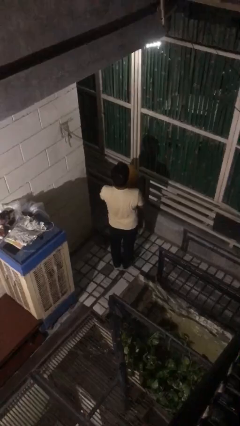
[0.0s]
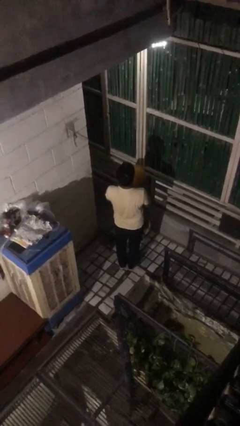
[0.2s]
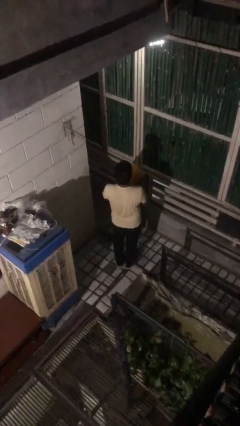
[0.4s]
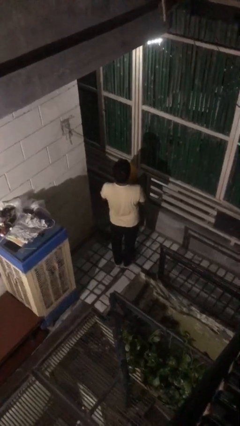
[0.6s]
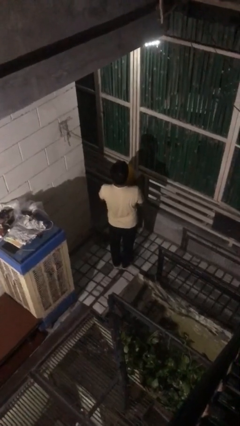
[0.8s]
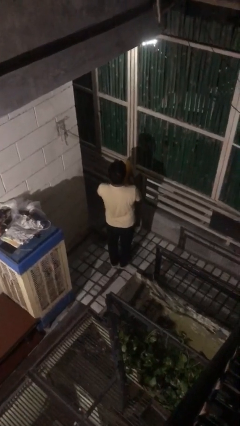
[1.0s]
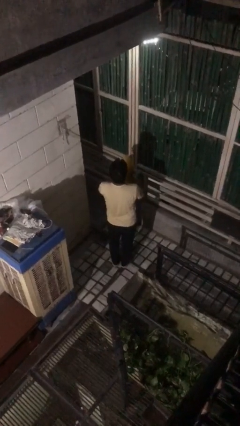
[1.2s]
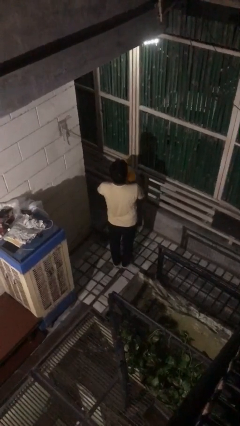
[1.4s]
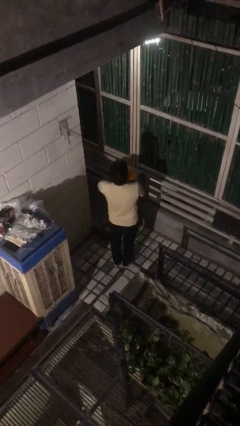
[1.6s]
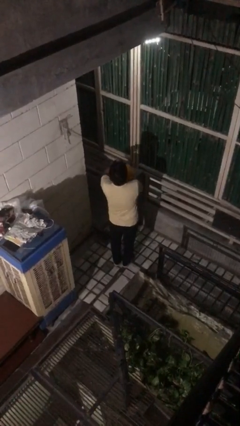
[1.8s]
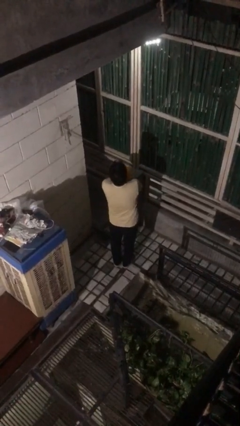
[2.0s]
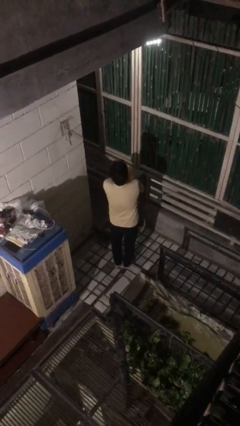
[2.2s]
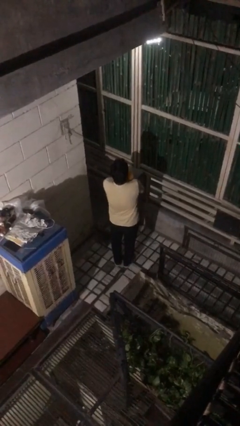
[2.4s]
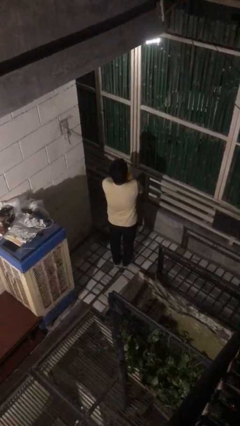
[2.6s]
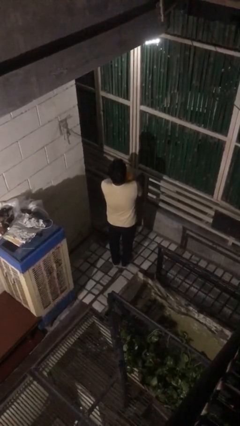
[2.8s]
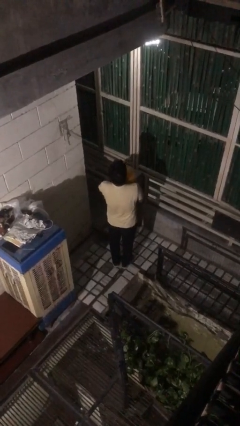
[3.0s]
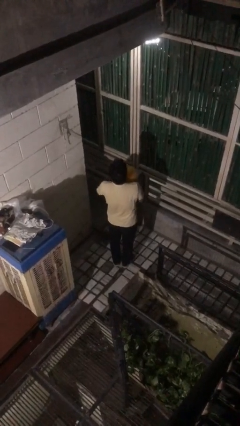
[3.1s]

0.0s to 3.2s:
person hugs stuffed animal

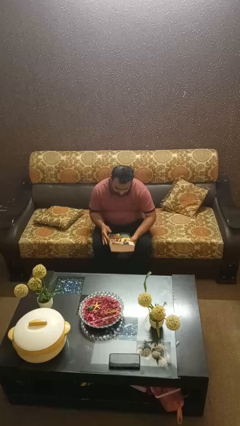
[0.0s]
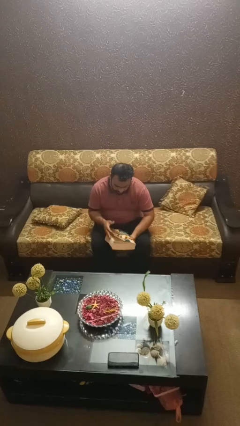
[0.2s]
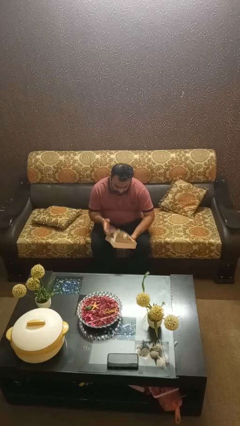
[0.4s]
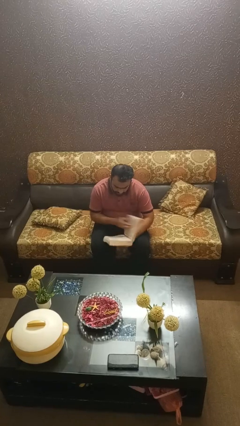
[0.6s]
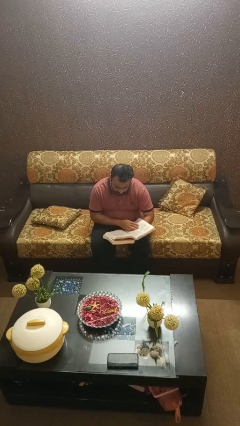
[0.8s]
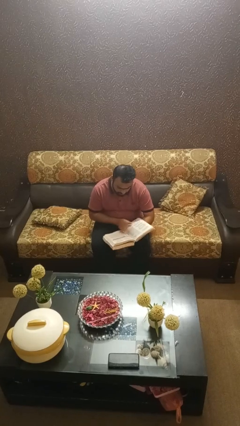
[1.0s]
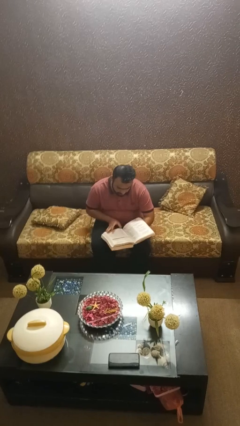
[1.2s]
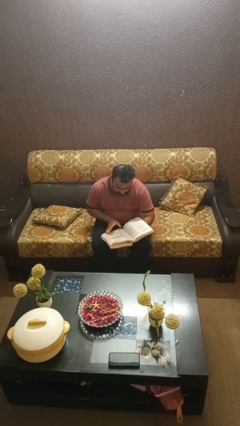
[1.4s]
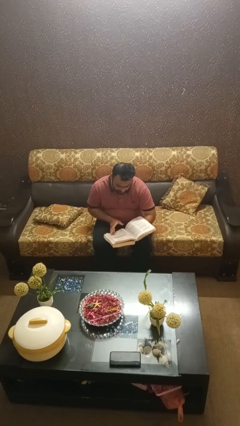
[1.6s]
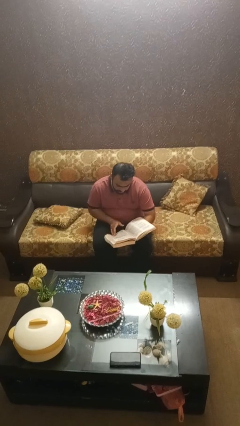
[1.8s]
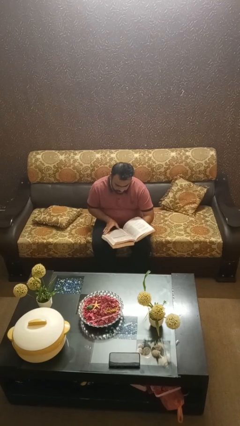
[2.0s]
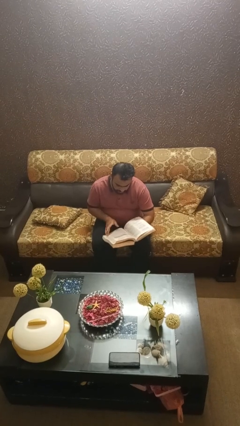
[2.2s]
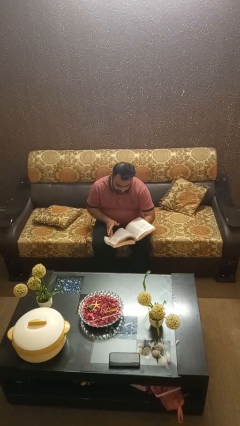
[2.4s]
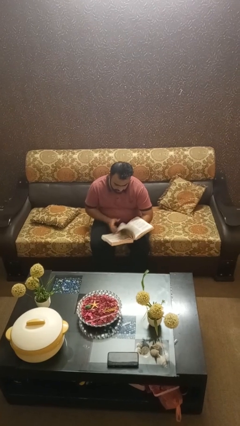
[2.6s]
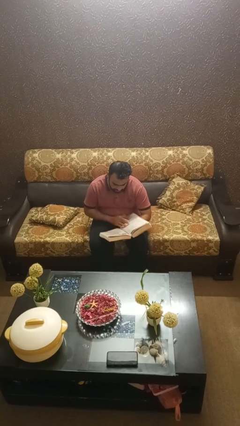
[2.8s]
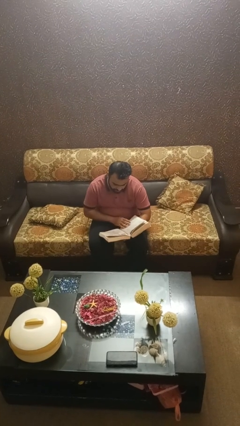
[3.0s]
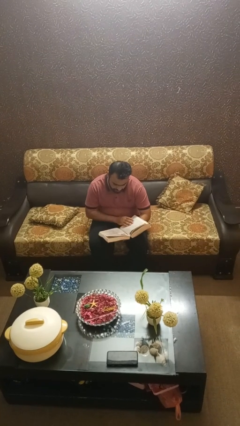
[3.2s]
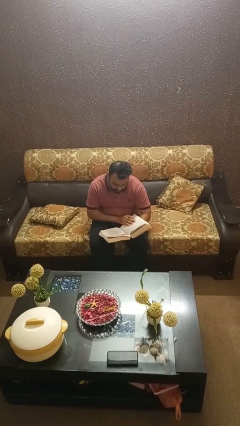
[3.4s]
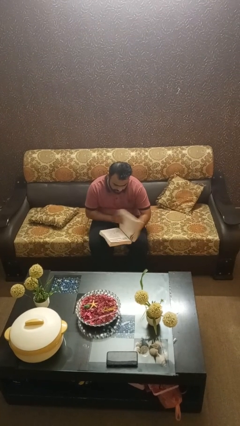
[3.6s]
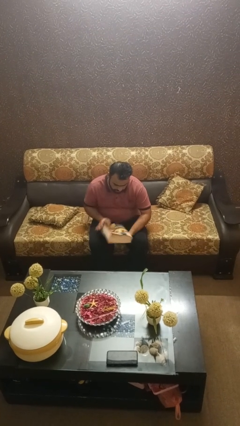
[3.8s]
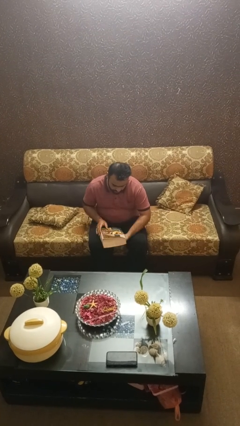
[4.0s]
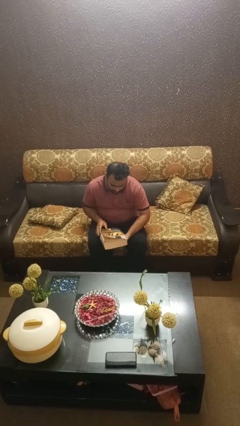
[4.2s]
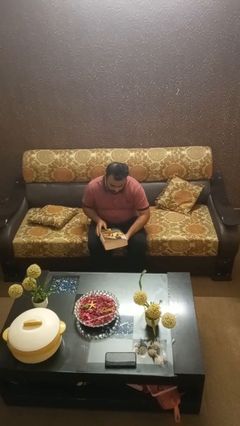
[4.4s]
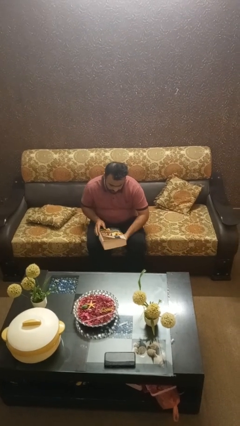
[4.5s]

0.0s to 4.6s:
person reads book

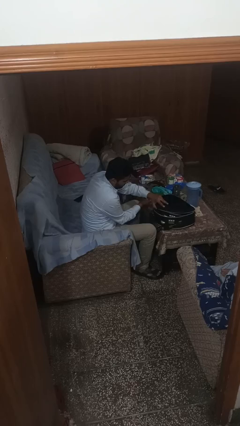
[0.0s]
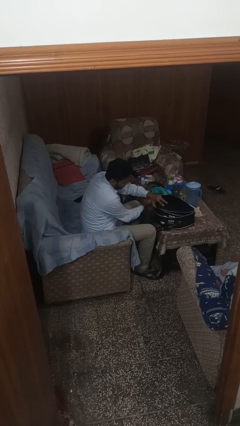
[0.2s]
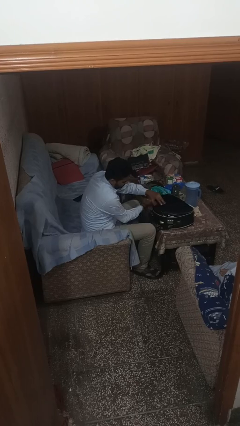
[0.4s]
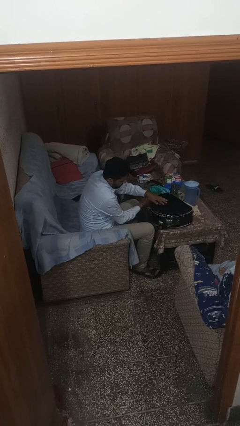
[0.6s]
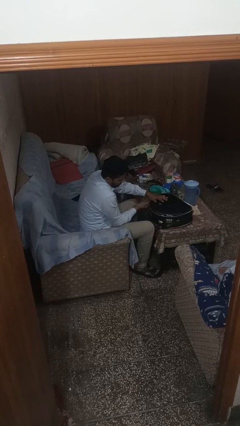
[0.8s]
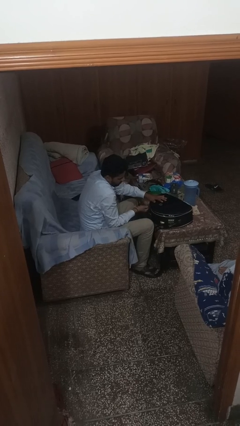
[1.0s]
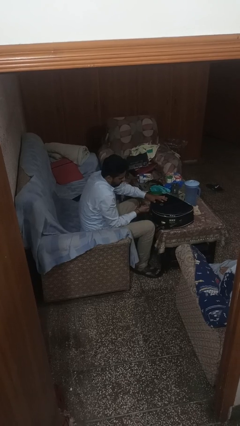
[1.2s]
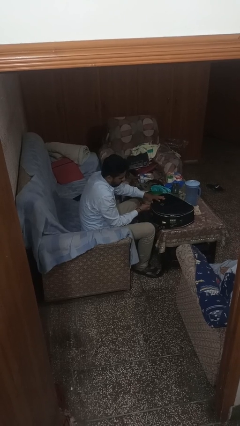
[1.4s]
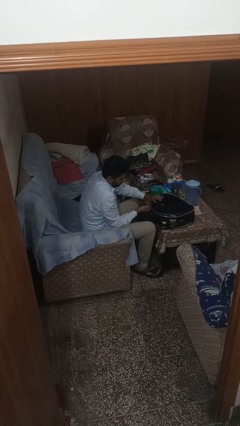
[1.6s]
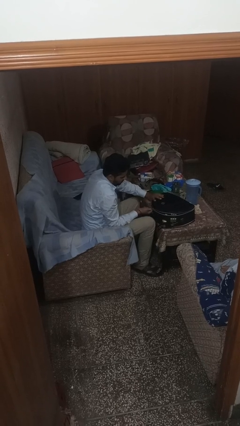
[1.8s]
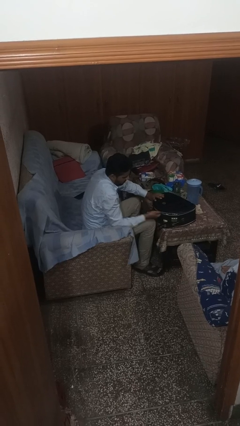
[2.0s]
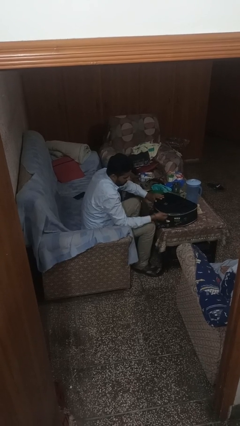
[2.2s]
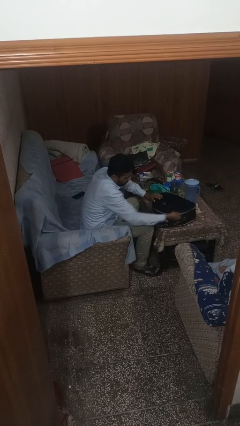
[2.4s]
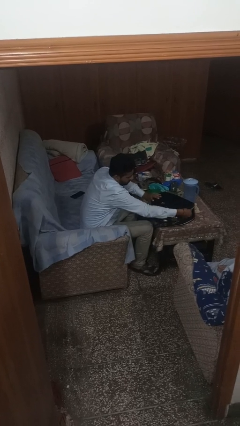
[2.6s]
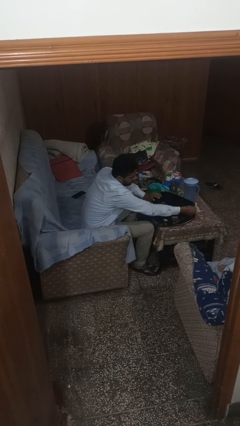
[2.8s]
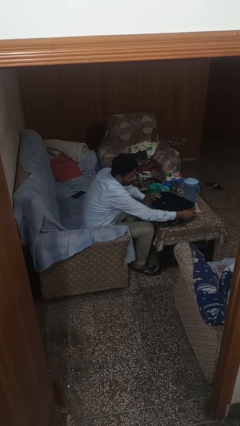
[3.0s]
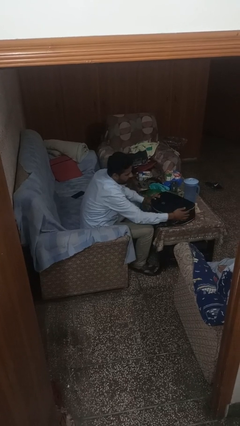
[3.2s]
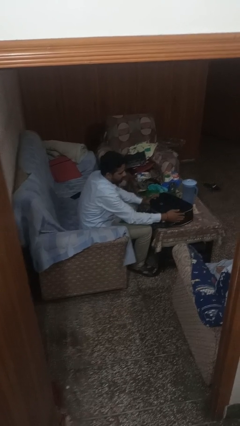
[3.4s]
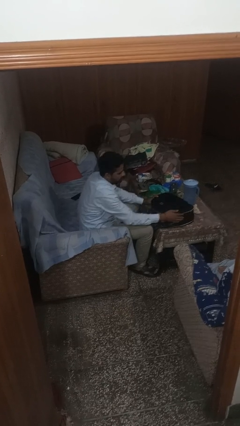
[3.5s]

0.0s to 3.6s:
person closes suitcase

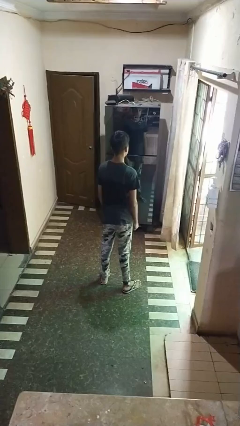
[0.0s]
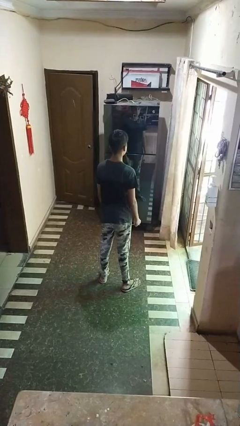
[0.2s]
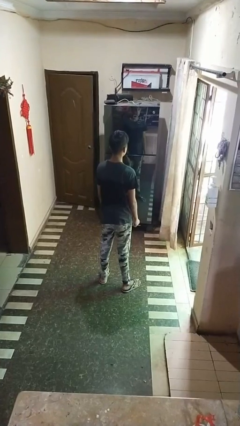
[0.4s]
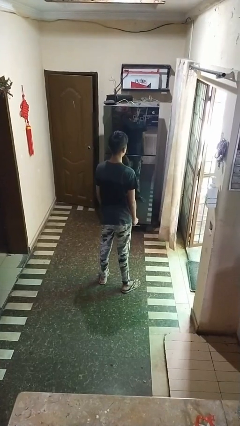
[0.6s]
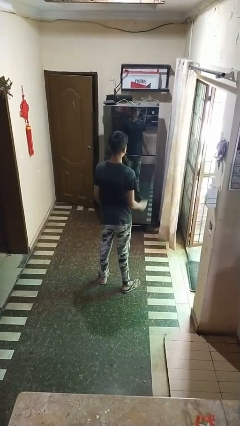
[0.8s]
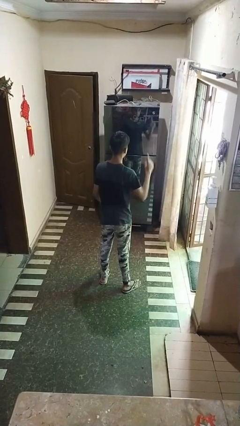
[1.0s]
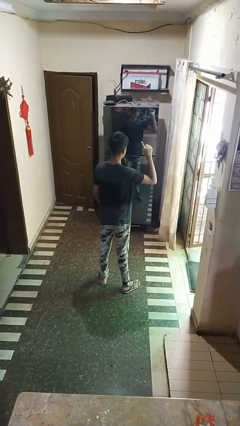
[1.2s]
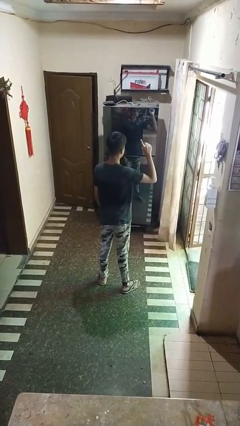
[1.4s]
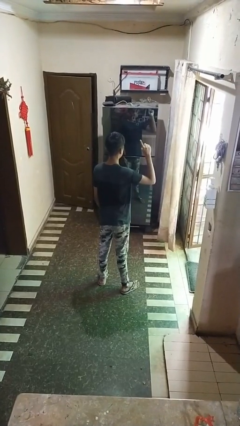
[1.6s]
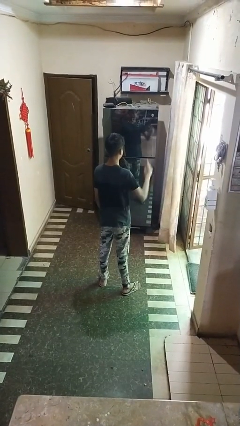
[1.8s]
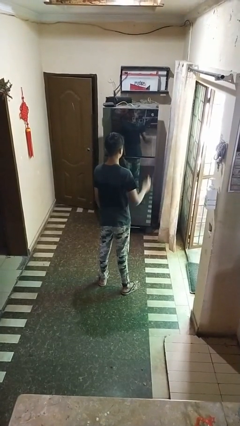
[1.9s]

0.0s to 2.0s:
person gestures number one

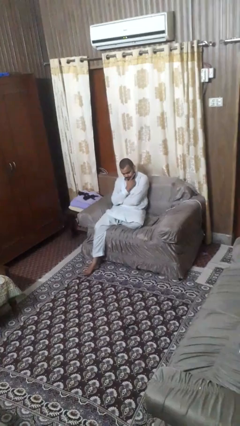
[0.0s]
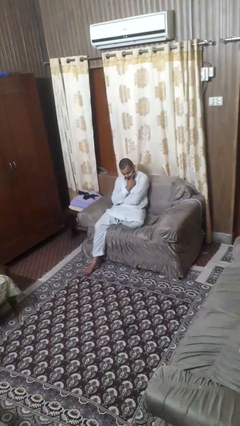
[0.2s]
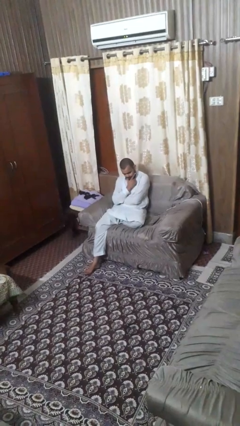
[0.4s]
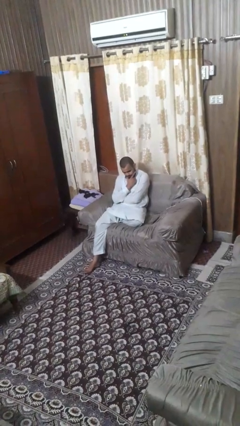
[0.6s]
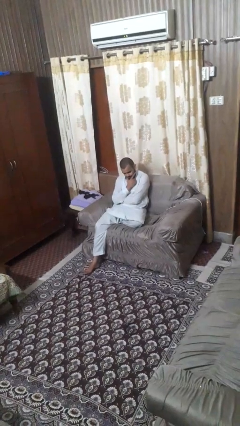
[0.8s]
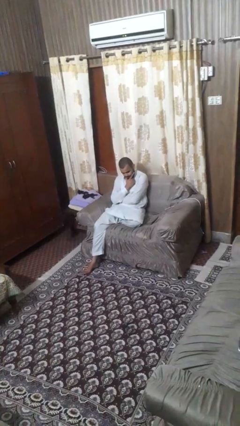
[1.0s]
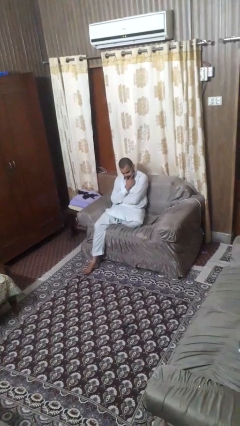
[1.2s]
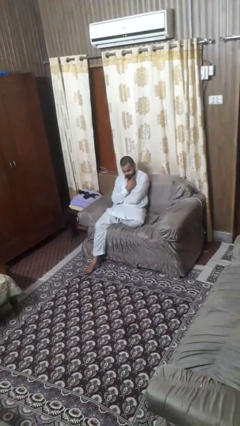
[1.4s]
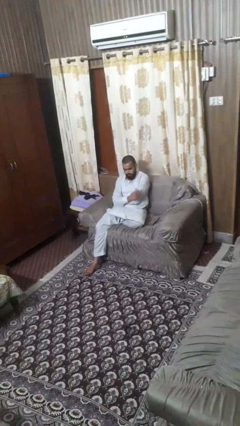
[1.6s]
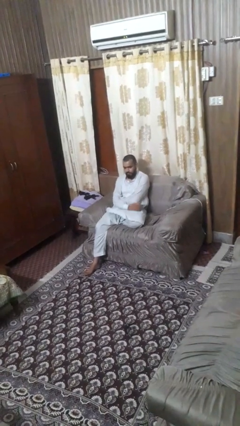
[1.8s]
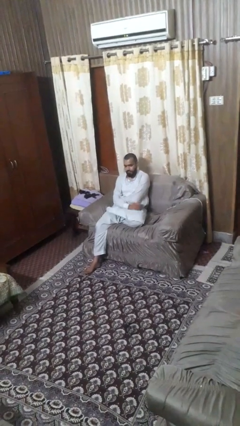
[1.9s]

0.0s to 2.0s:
person strokes chin

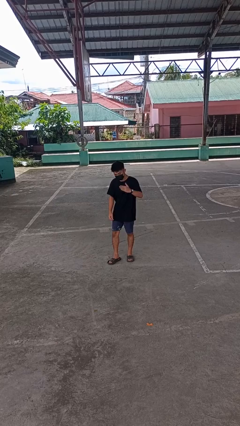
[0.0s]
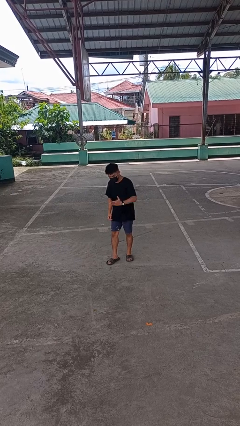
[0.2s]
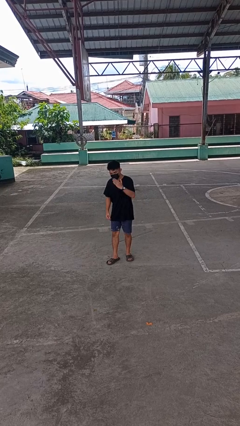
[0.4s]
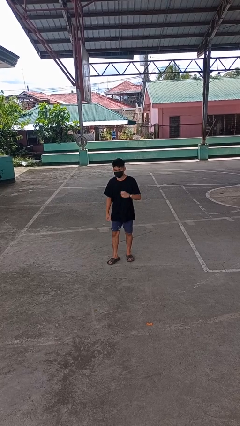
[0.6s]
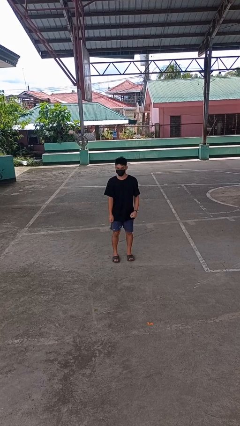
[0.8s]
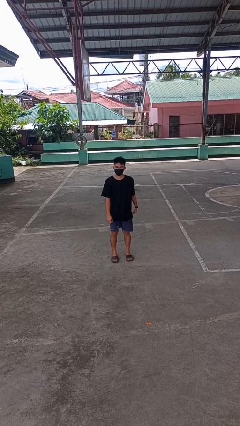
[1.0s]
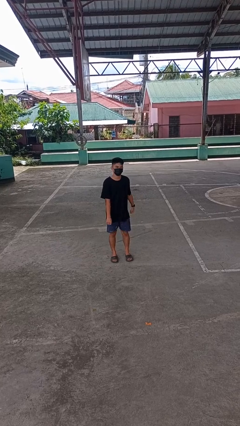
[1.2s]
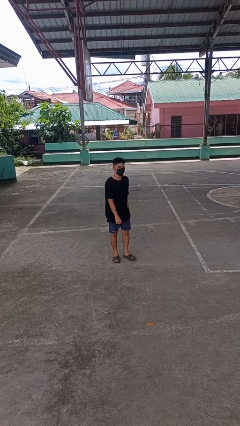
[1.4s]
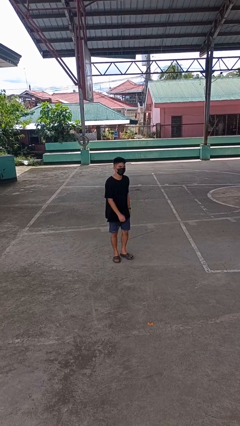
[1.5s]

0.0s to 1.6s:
person karate chop

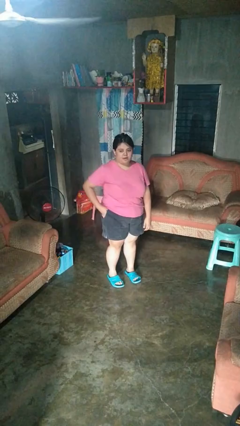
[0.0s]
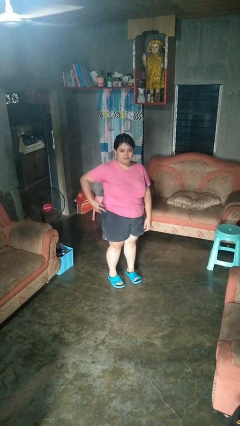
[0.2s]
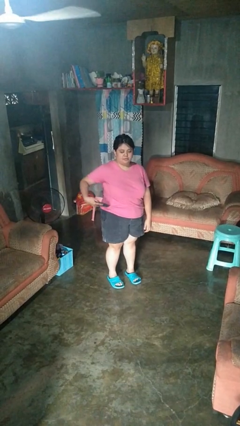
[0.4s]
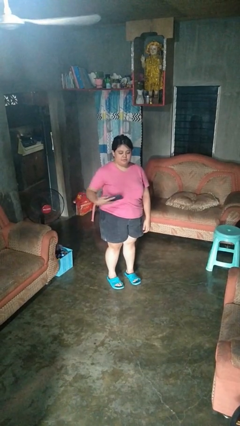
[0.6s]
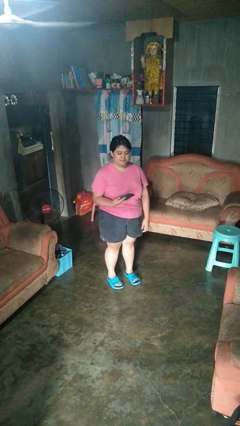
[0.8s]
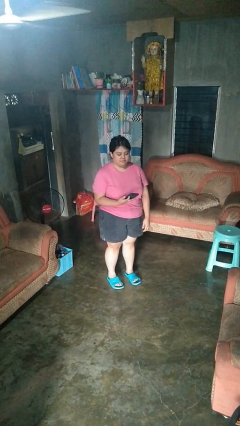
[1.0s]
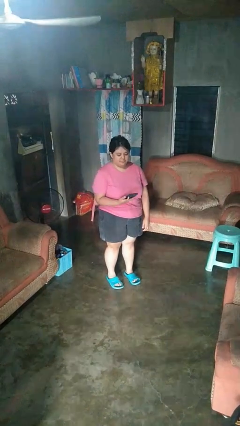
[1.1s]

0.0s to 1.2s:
person takes phone from pocket
